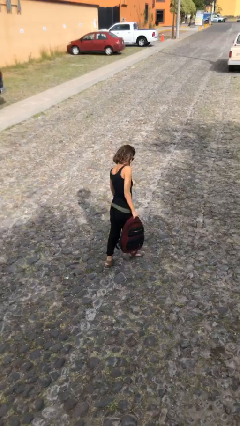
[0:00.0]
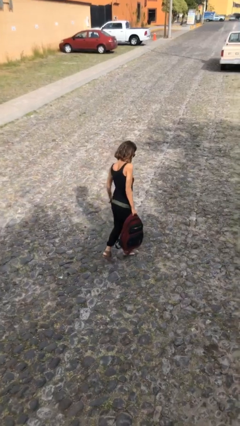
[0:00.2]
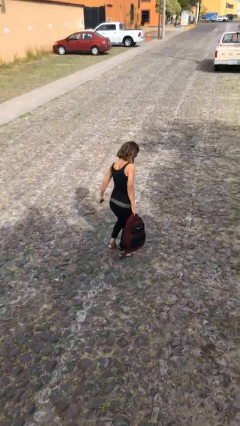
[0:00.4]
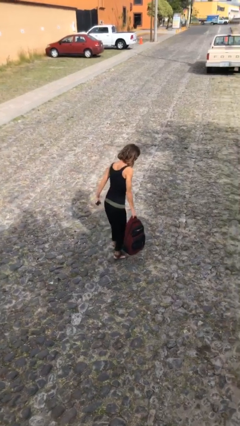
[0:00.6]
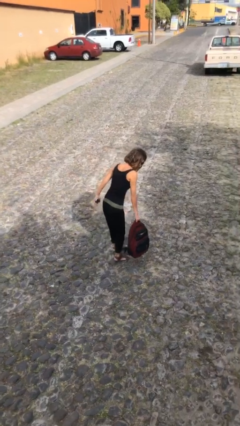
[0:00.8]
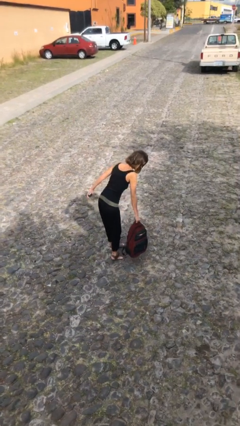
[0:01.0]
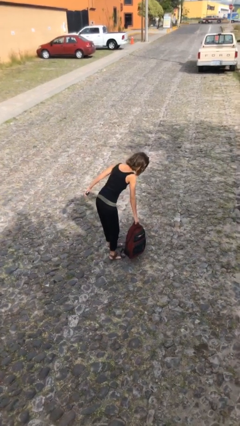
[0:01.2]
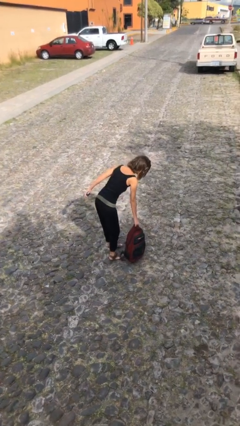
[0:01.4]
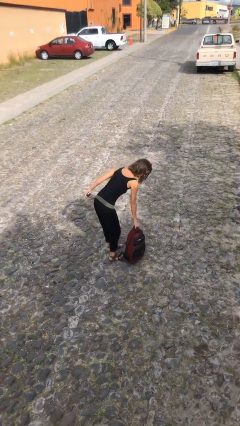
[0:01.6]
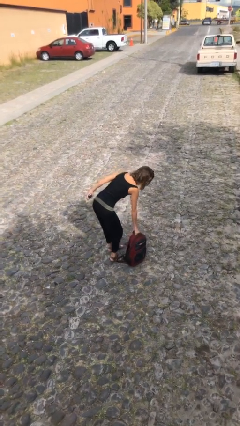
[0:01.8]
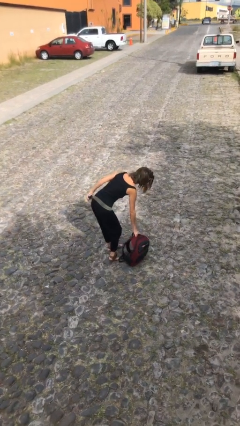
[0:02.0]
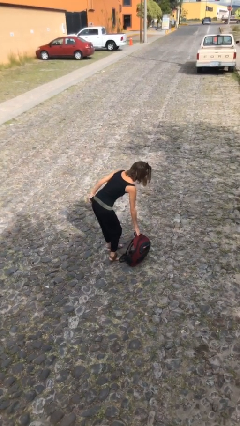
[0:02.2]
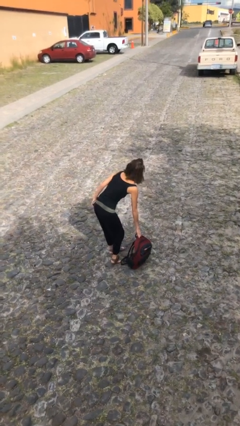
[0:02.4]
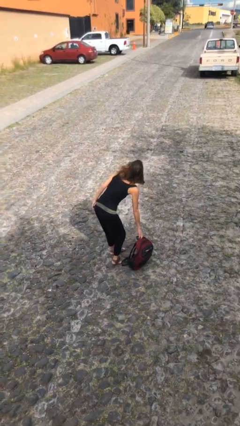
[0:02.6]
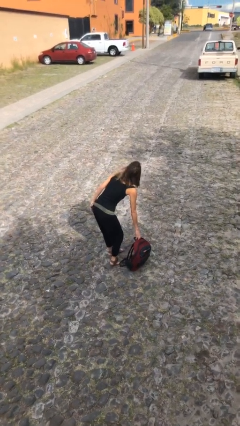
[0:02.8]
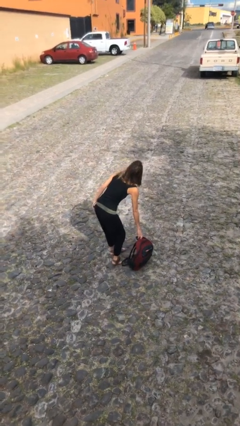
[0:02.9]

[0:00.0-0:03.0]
person puts down object on floor

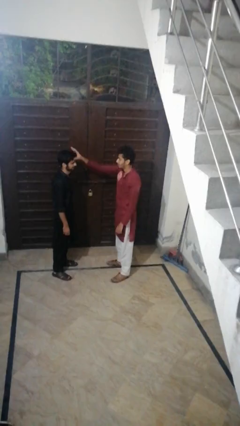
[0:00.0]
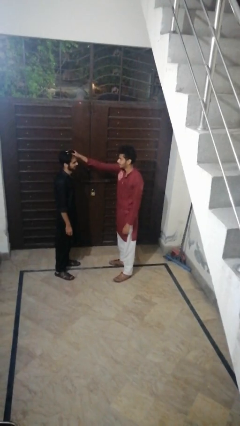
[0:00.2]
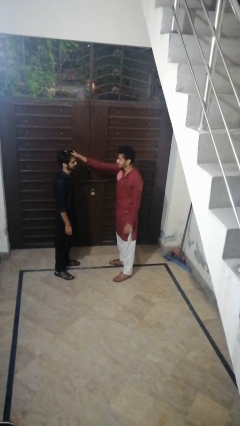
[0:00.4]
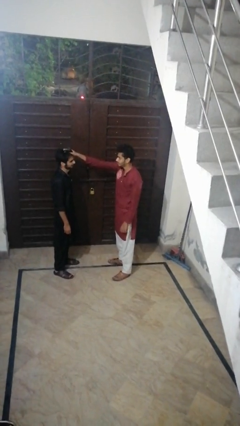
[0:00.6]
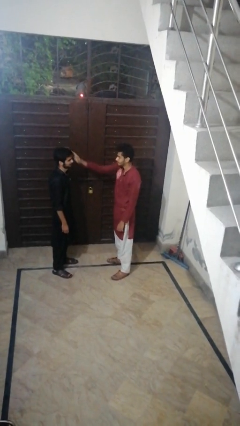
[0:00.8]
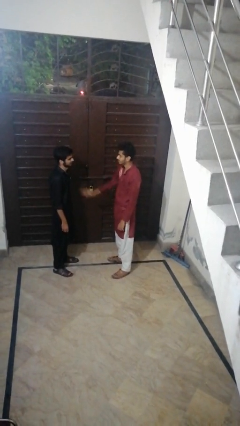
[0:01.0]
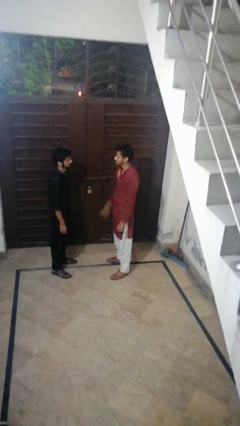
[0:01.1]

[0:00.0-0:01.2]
person grabs person by hair

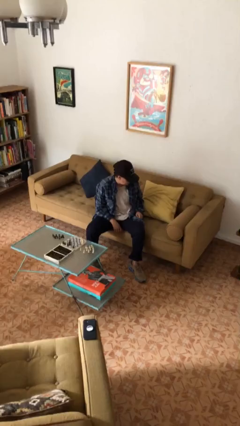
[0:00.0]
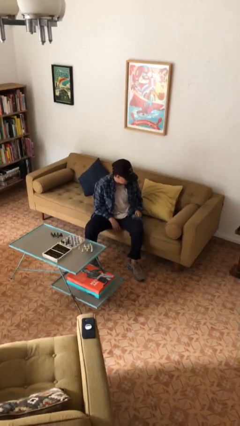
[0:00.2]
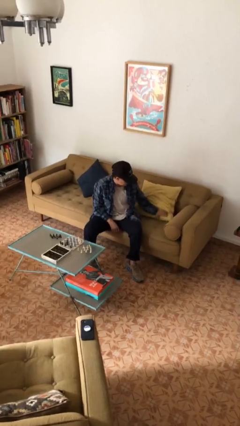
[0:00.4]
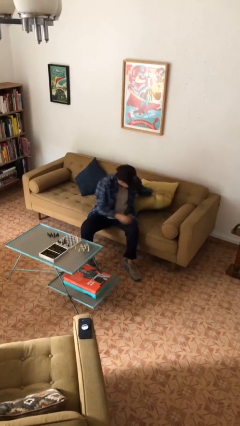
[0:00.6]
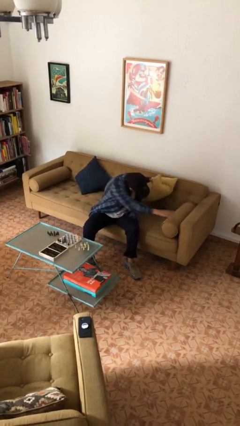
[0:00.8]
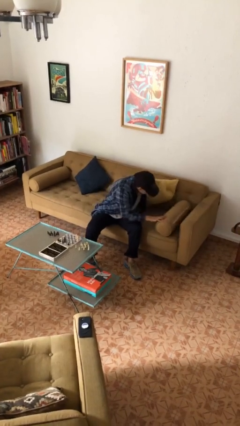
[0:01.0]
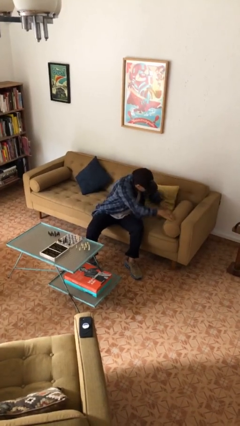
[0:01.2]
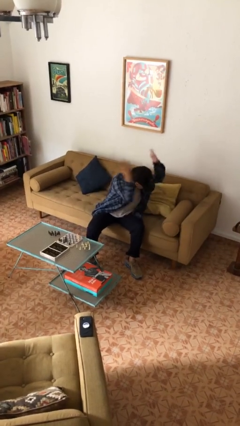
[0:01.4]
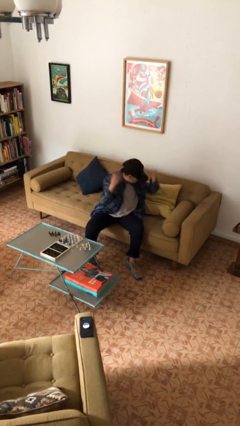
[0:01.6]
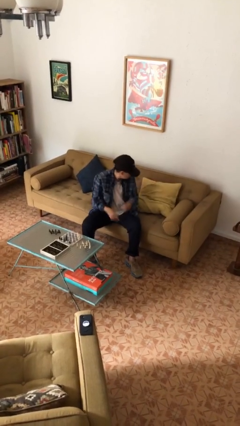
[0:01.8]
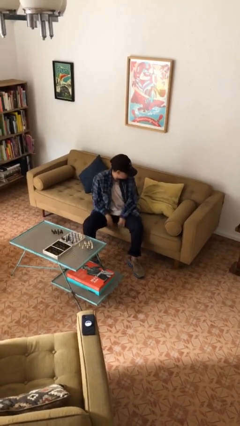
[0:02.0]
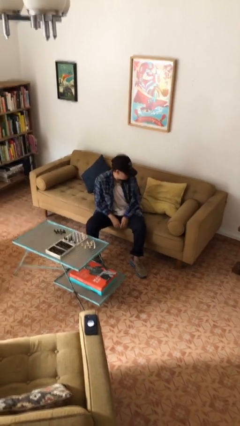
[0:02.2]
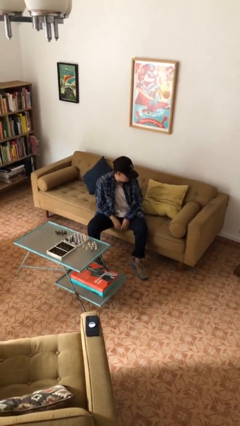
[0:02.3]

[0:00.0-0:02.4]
person searches in couch

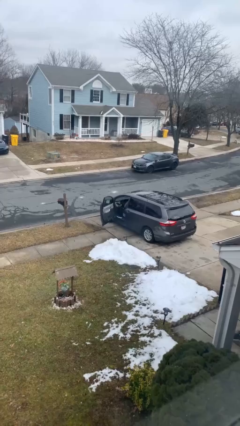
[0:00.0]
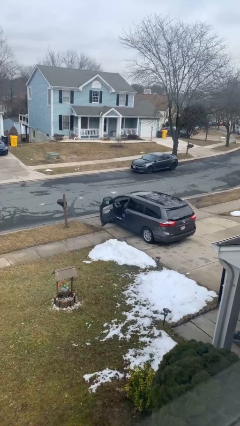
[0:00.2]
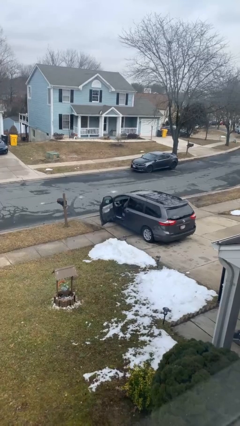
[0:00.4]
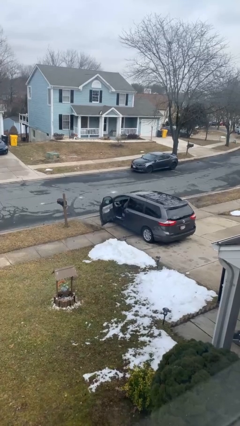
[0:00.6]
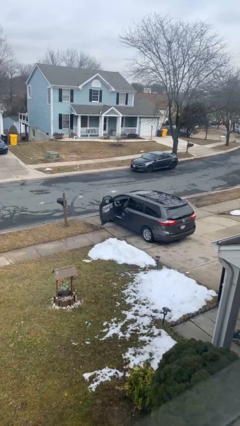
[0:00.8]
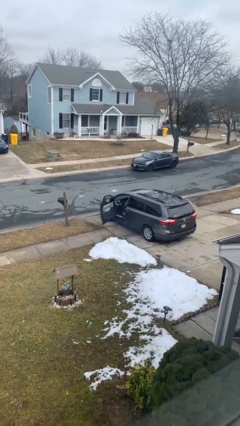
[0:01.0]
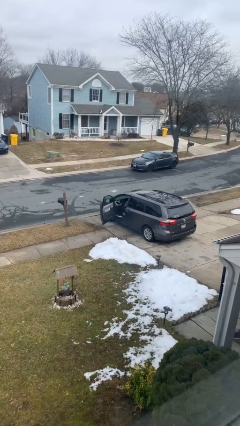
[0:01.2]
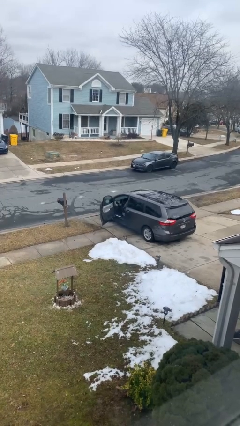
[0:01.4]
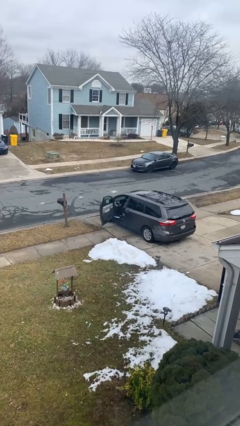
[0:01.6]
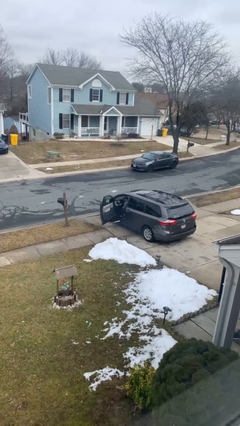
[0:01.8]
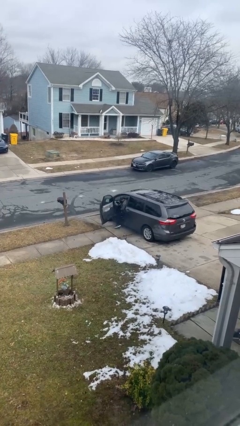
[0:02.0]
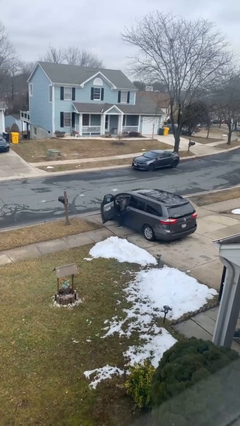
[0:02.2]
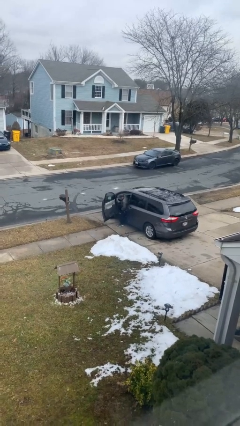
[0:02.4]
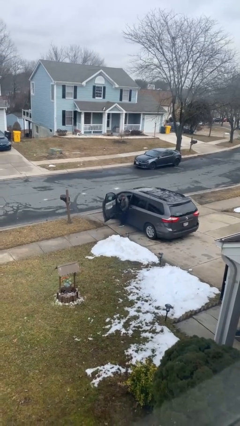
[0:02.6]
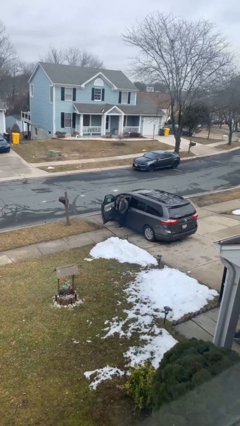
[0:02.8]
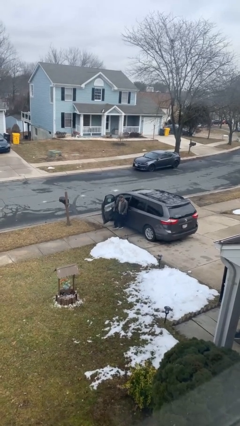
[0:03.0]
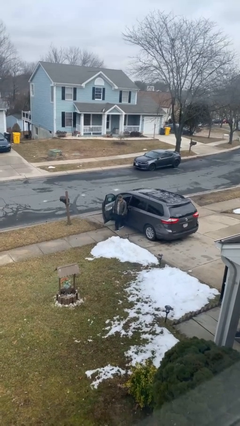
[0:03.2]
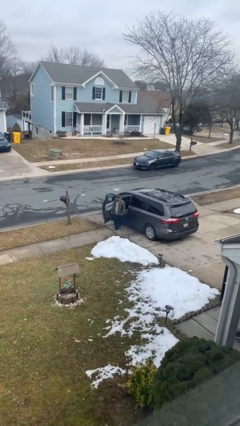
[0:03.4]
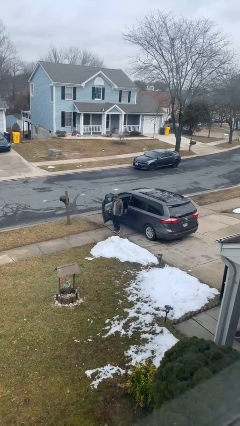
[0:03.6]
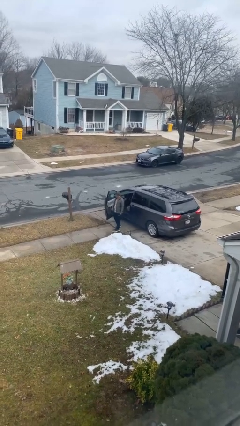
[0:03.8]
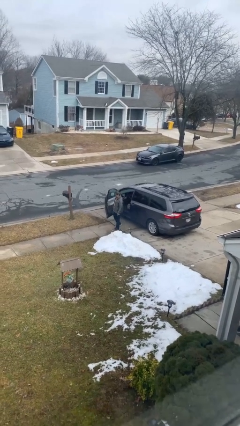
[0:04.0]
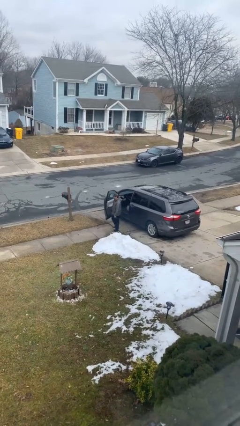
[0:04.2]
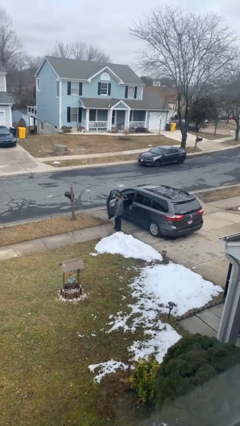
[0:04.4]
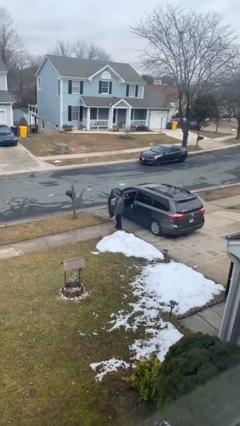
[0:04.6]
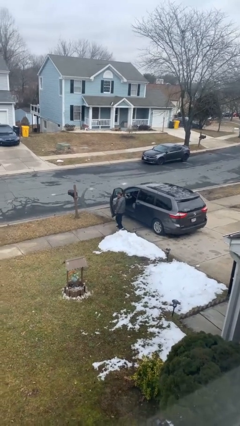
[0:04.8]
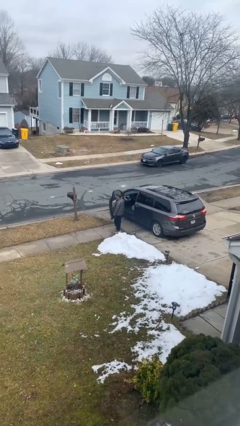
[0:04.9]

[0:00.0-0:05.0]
person exits car

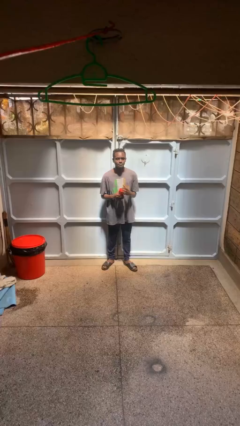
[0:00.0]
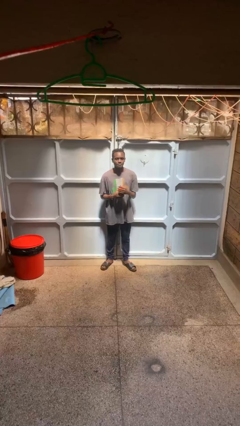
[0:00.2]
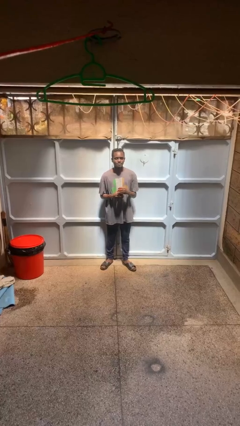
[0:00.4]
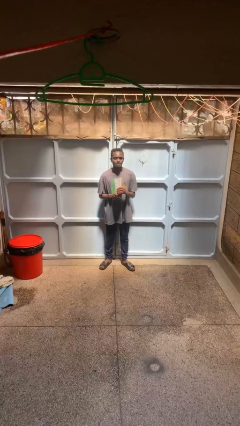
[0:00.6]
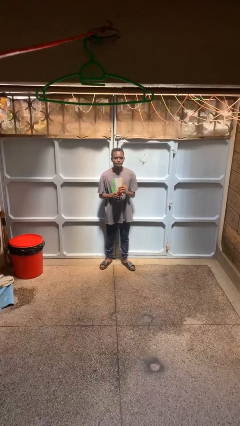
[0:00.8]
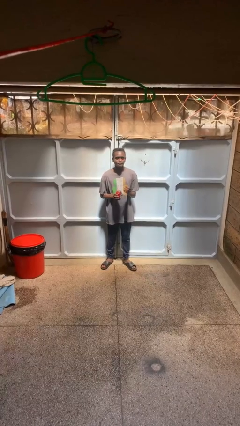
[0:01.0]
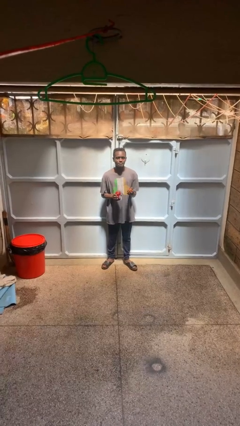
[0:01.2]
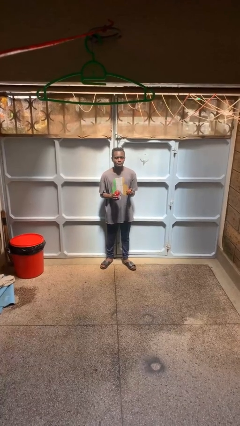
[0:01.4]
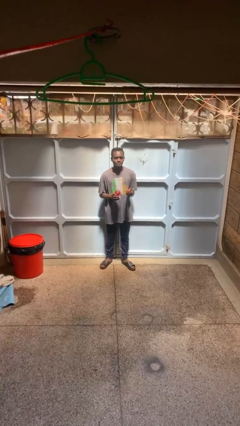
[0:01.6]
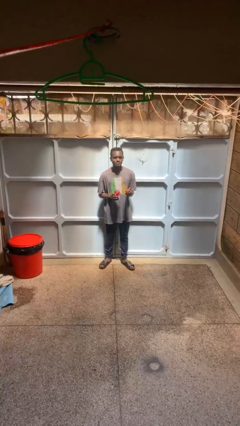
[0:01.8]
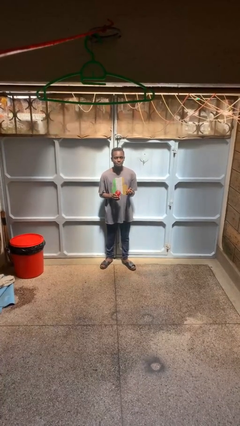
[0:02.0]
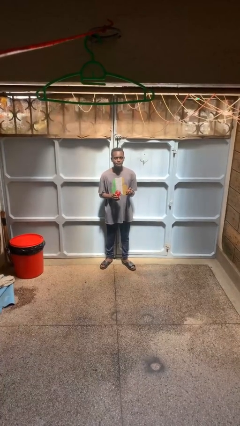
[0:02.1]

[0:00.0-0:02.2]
person opens jar

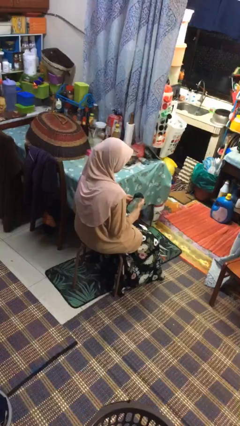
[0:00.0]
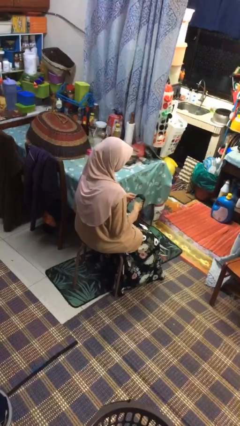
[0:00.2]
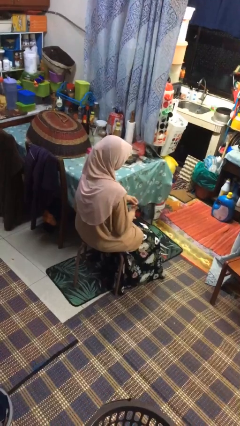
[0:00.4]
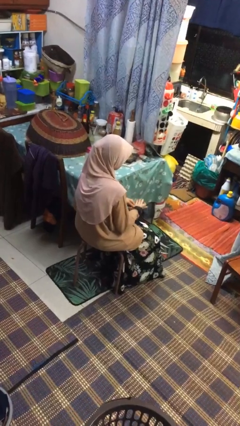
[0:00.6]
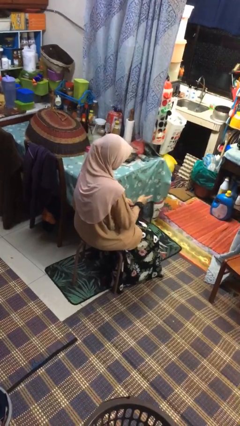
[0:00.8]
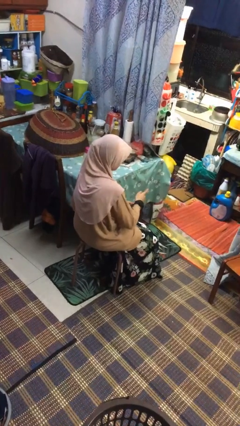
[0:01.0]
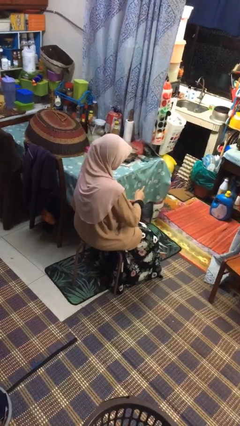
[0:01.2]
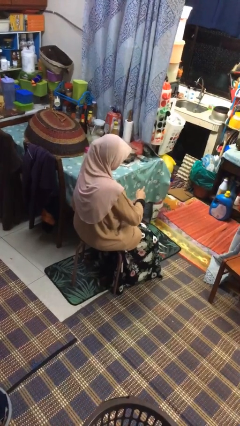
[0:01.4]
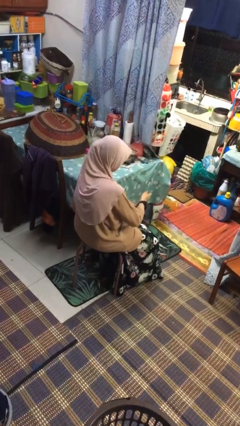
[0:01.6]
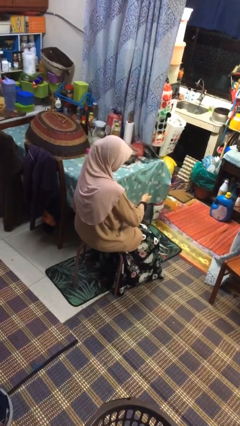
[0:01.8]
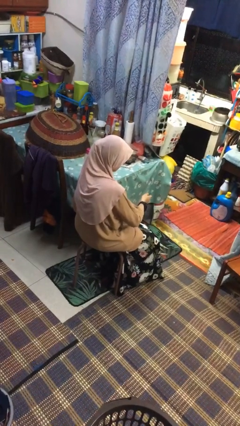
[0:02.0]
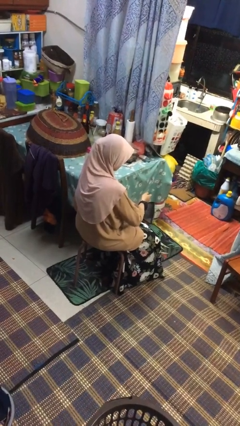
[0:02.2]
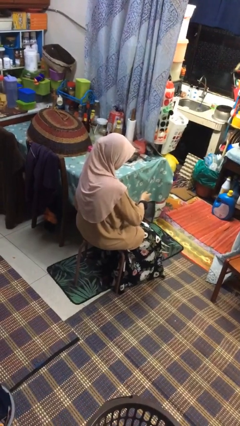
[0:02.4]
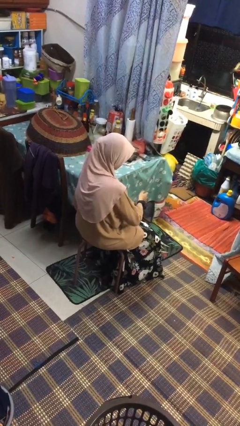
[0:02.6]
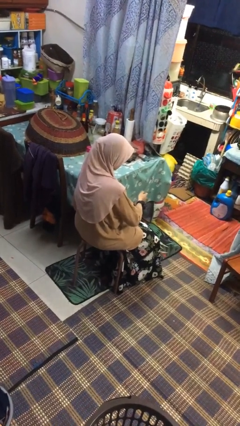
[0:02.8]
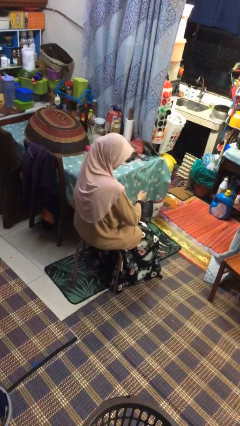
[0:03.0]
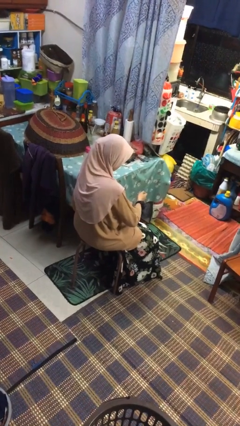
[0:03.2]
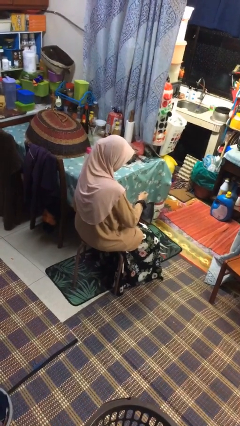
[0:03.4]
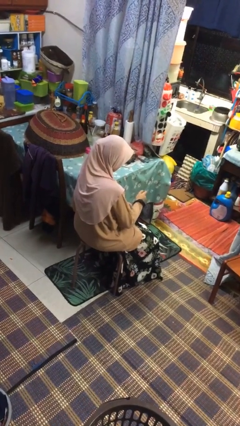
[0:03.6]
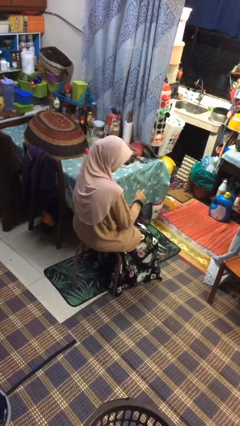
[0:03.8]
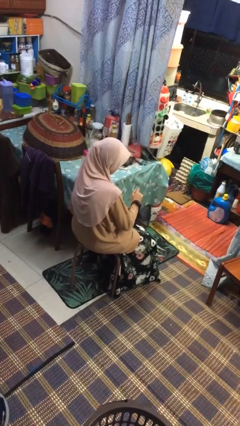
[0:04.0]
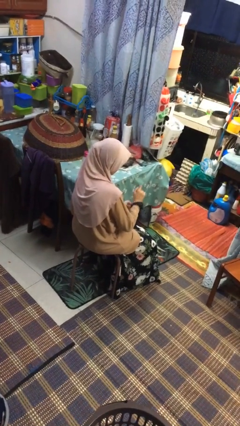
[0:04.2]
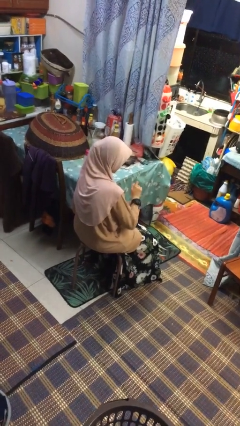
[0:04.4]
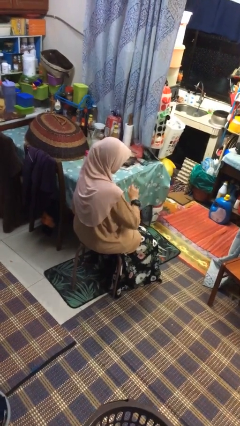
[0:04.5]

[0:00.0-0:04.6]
person puts on wristwatch
